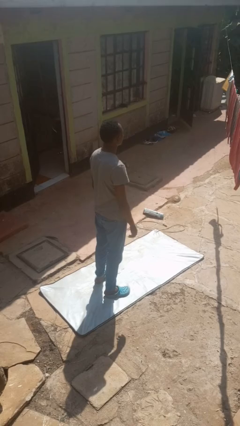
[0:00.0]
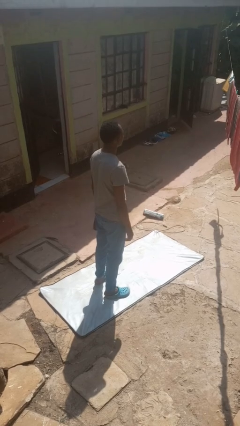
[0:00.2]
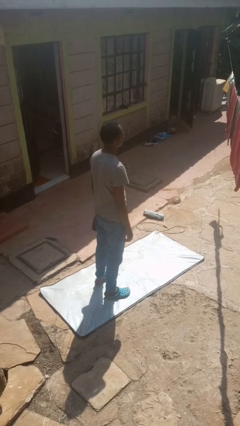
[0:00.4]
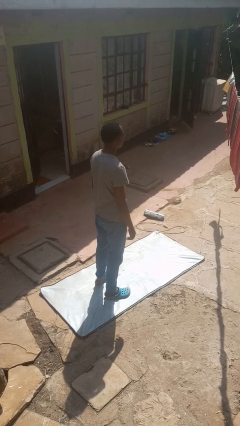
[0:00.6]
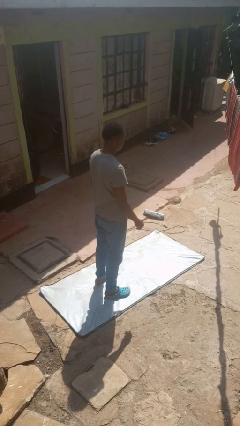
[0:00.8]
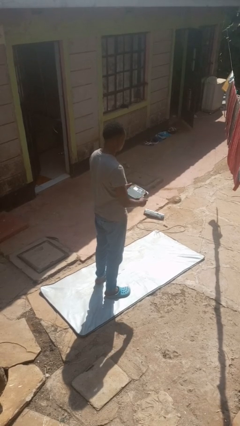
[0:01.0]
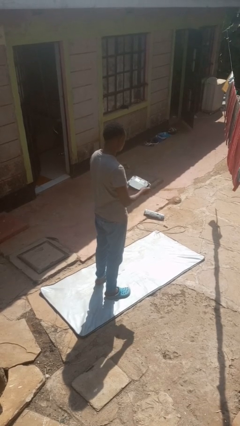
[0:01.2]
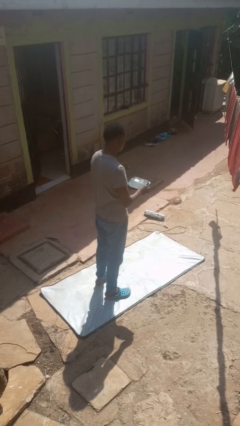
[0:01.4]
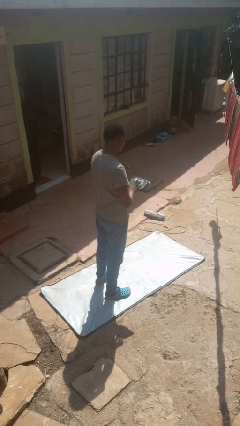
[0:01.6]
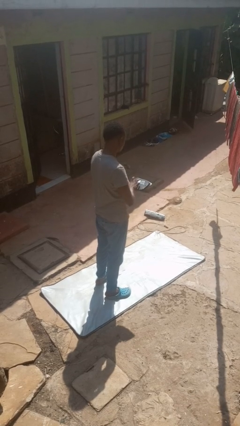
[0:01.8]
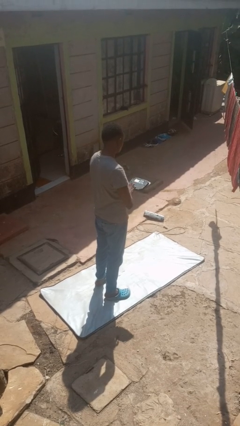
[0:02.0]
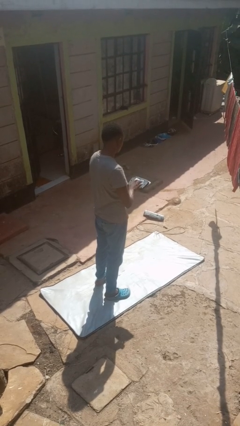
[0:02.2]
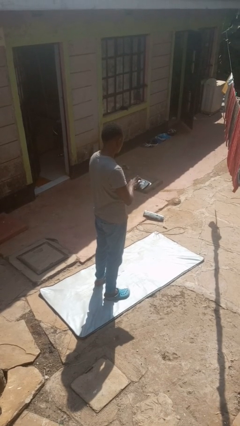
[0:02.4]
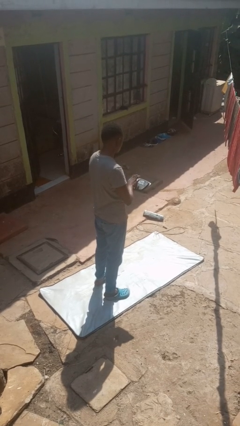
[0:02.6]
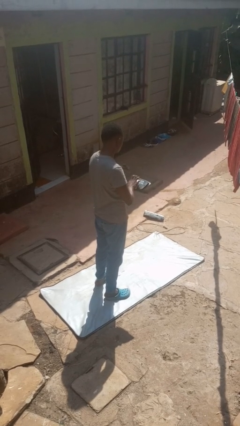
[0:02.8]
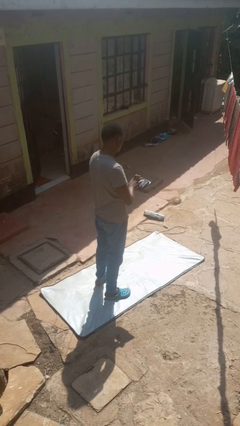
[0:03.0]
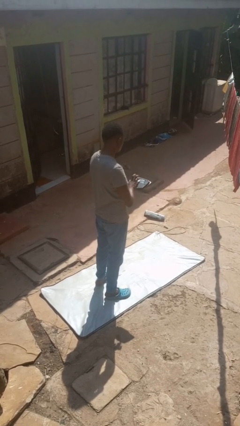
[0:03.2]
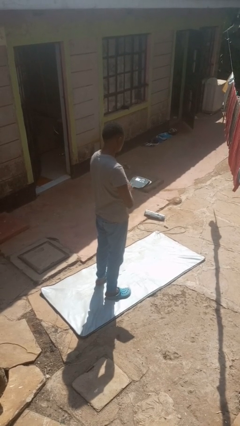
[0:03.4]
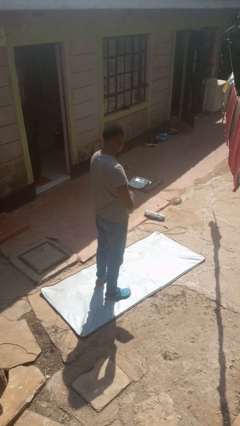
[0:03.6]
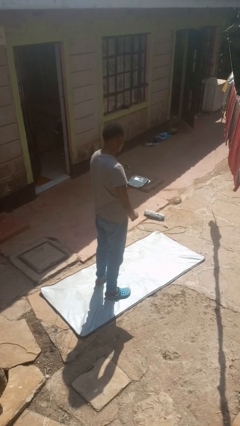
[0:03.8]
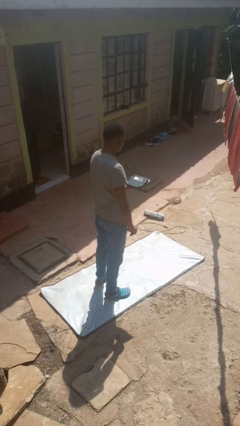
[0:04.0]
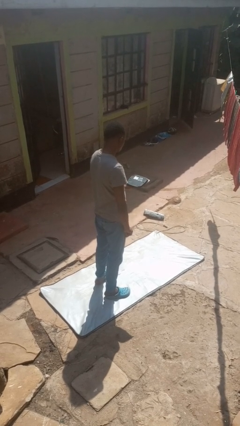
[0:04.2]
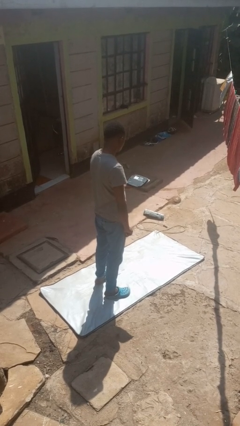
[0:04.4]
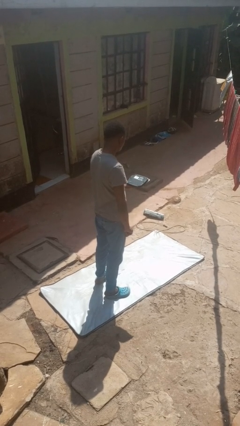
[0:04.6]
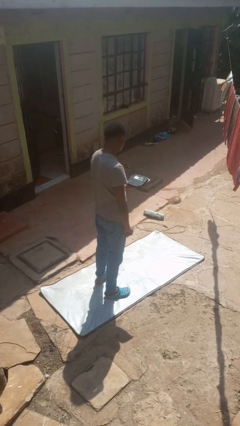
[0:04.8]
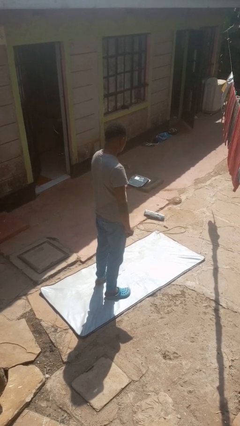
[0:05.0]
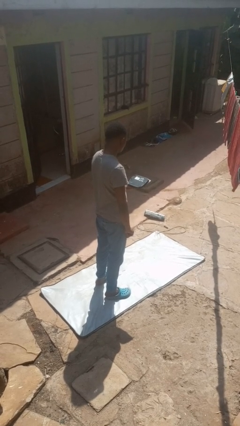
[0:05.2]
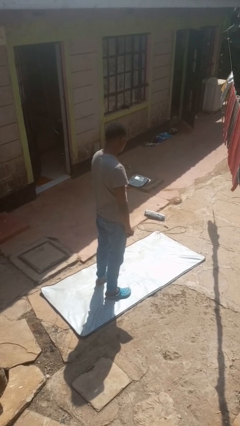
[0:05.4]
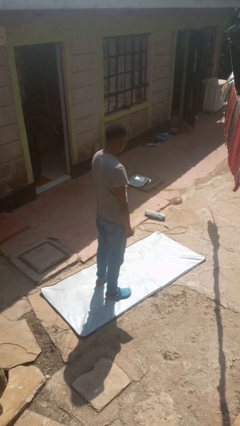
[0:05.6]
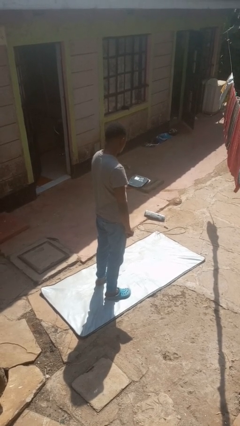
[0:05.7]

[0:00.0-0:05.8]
person interacts with tablet

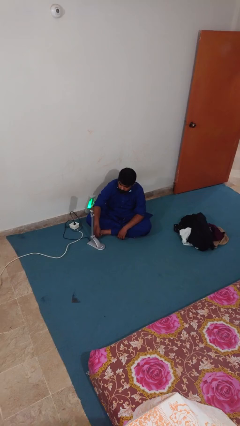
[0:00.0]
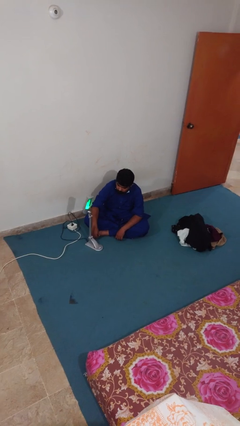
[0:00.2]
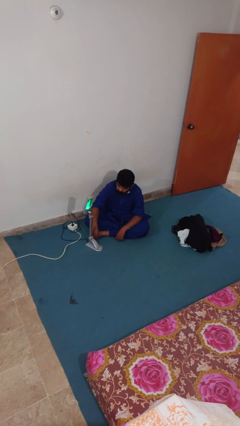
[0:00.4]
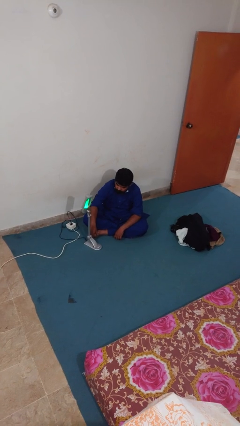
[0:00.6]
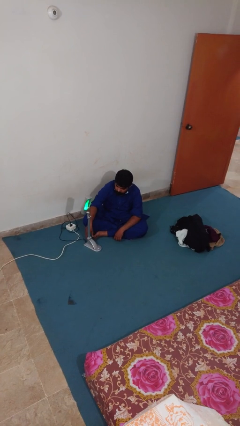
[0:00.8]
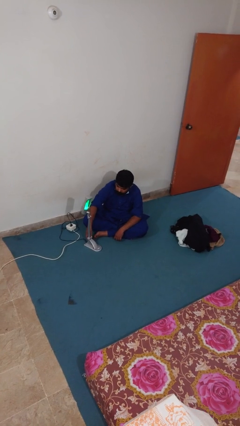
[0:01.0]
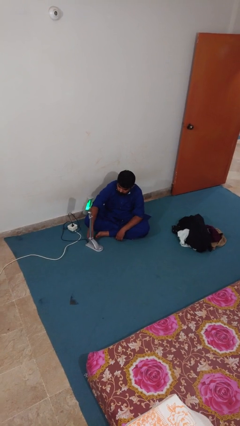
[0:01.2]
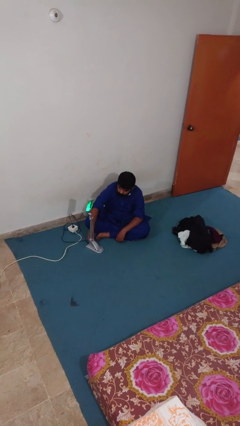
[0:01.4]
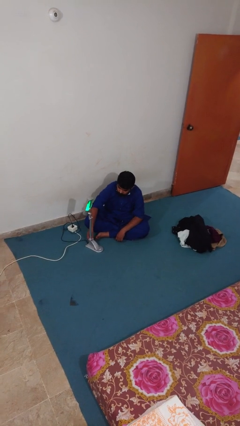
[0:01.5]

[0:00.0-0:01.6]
person turns off lamp

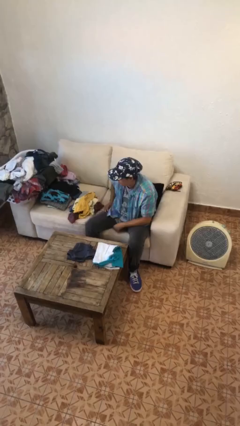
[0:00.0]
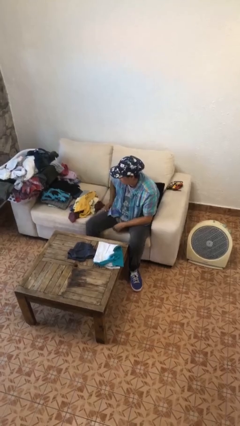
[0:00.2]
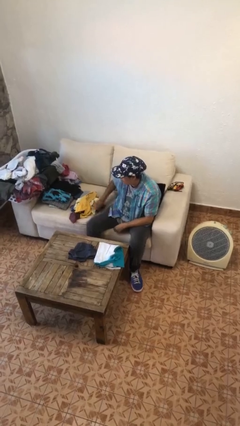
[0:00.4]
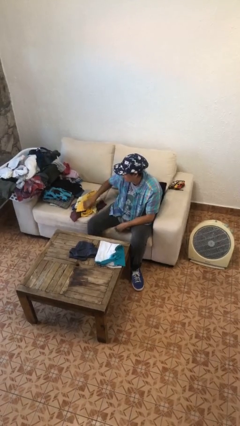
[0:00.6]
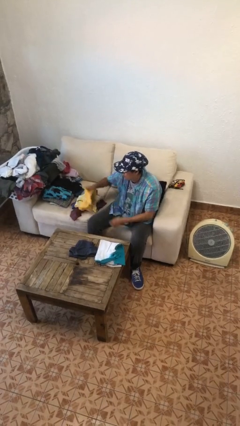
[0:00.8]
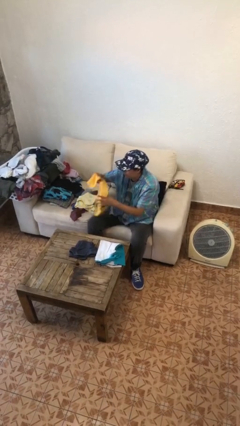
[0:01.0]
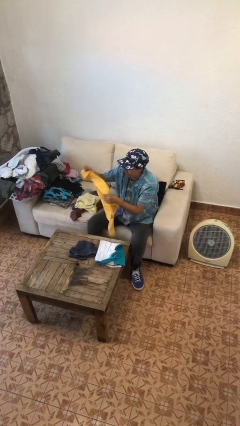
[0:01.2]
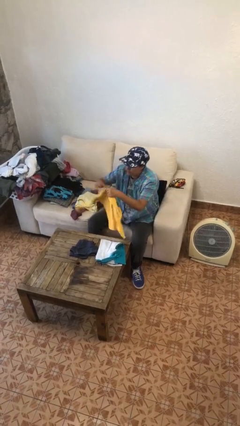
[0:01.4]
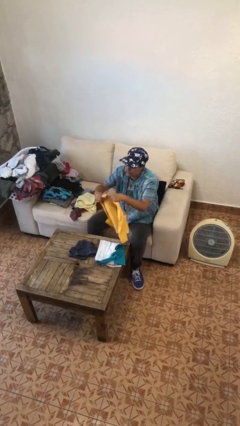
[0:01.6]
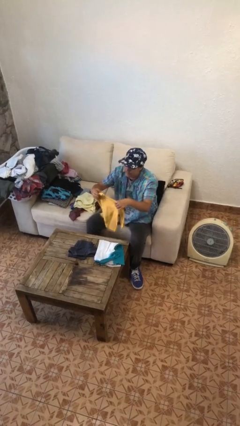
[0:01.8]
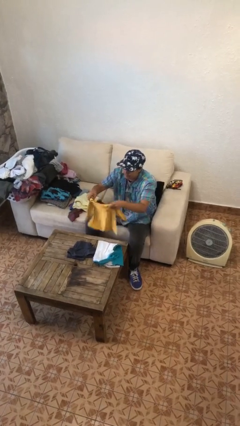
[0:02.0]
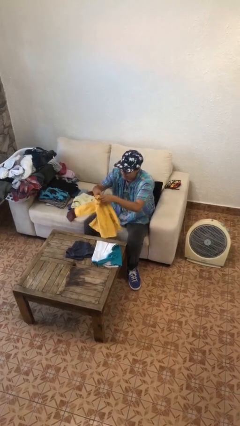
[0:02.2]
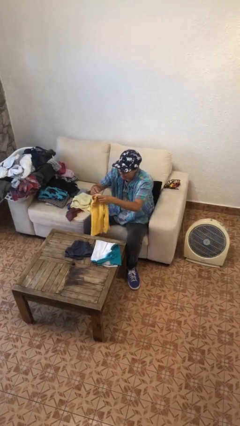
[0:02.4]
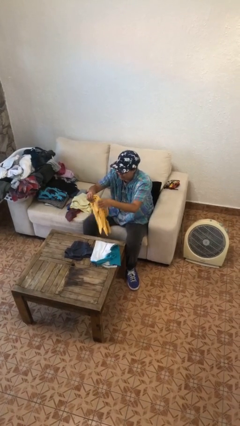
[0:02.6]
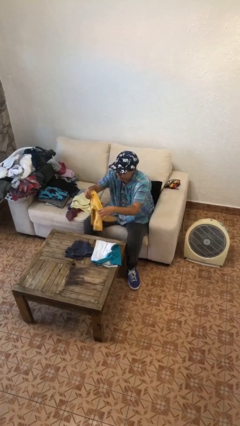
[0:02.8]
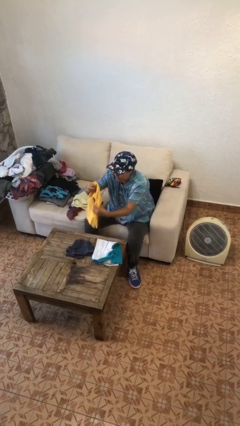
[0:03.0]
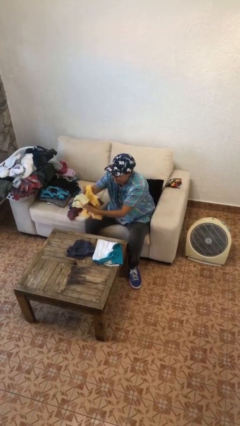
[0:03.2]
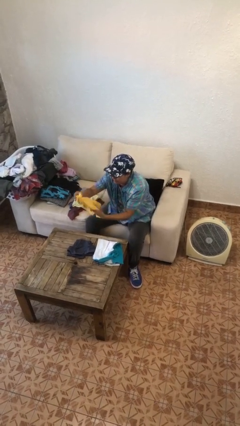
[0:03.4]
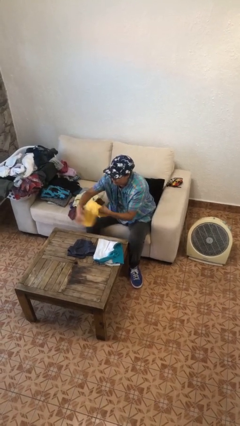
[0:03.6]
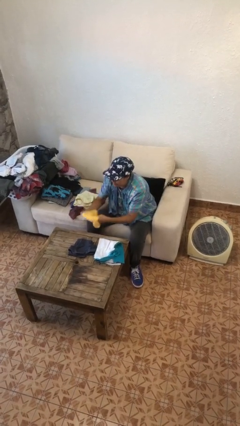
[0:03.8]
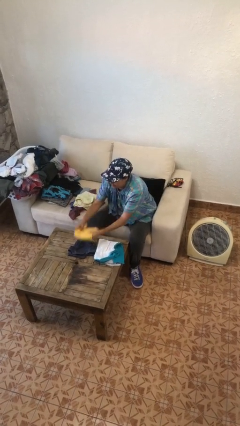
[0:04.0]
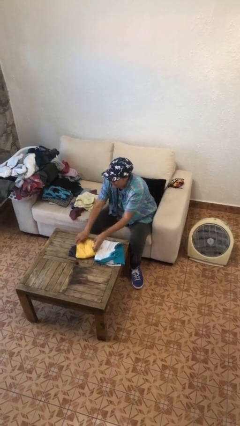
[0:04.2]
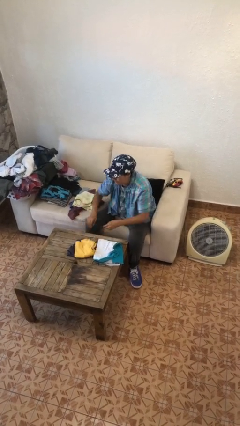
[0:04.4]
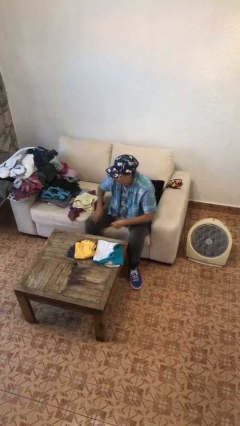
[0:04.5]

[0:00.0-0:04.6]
person folds shirt

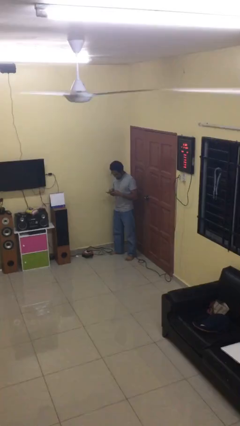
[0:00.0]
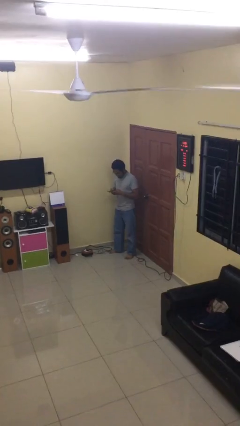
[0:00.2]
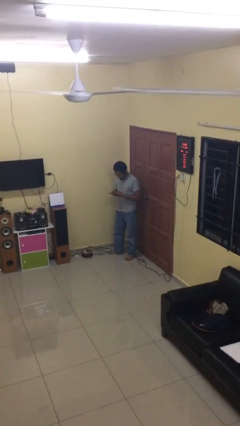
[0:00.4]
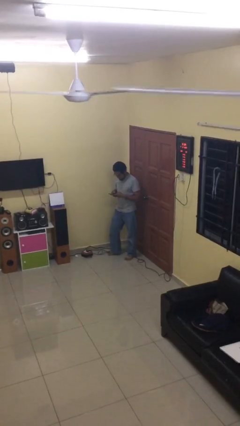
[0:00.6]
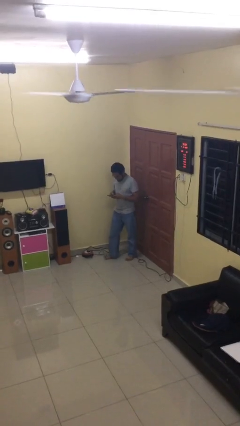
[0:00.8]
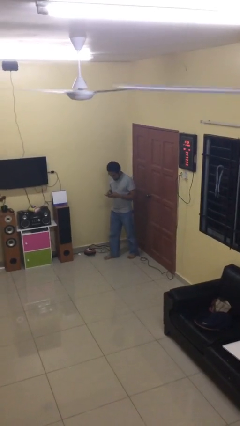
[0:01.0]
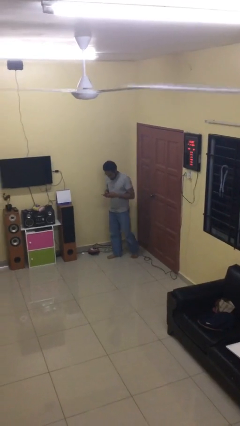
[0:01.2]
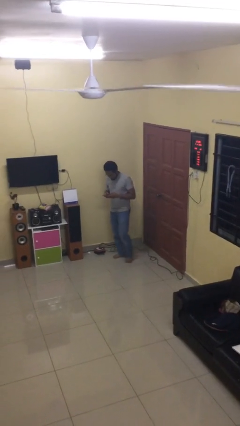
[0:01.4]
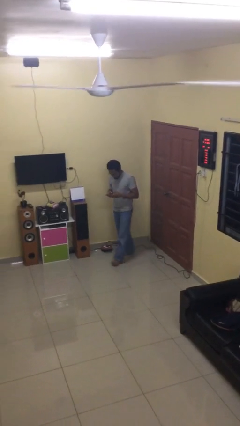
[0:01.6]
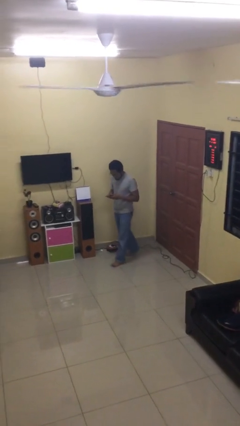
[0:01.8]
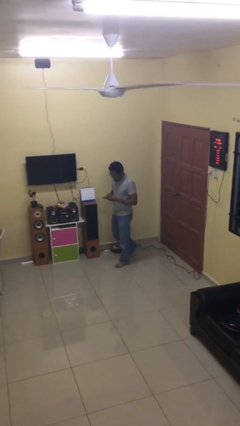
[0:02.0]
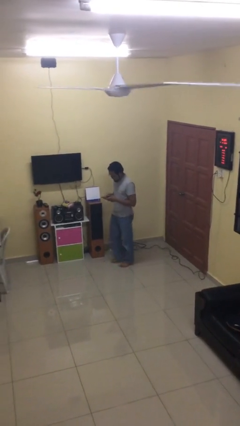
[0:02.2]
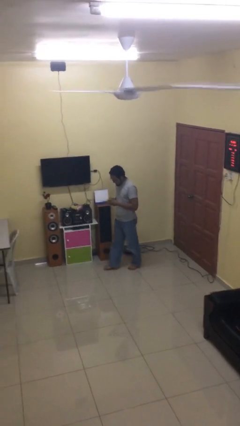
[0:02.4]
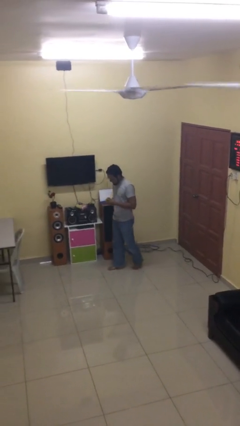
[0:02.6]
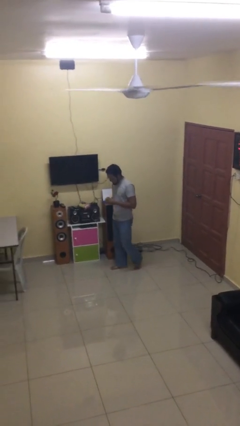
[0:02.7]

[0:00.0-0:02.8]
person texts on phone

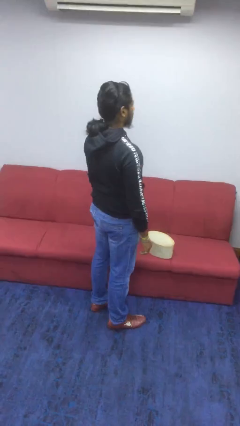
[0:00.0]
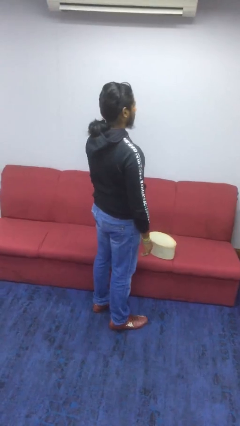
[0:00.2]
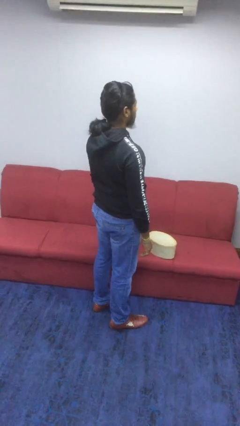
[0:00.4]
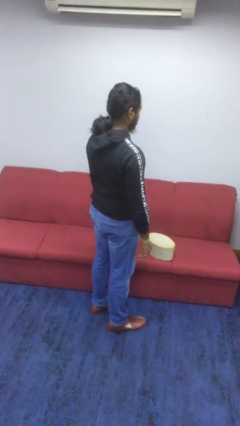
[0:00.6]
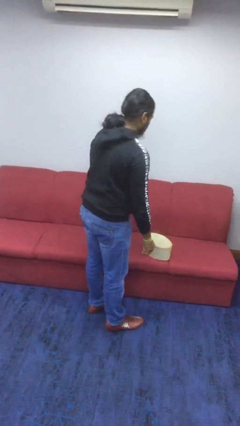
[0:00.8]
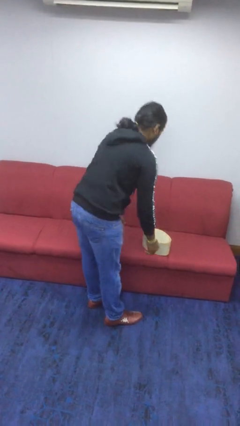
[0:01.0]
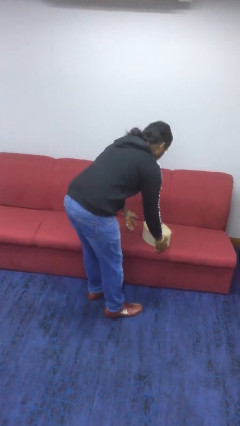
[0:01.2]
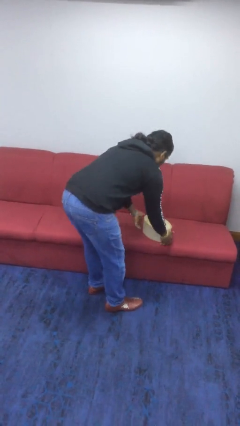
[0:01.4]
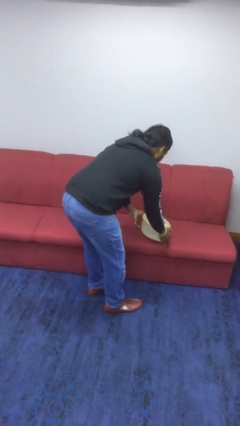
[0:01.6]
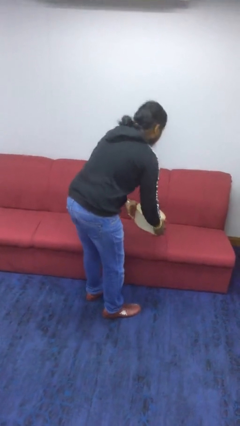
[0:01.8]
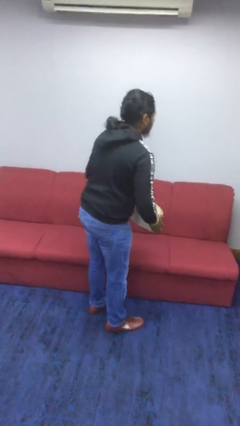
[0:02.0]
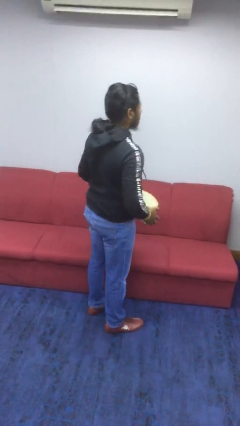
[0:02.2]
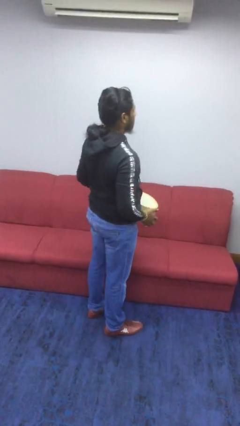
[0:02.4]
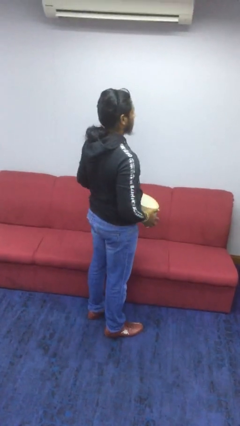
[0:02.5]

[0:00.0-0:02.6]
person picks up object from couch

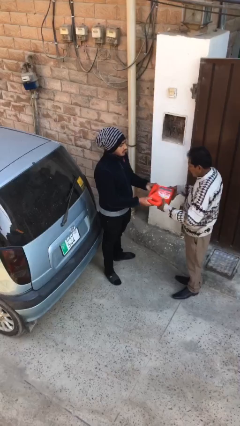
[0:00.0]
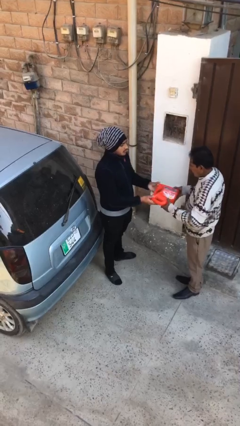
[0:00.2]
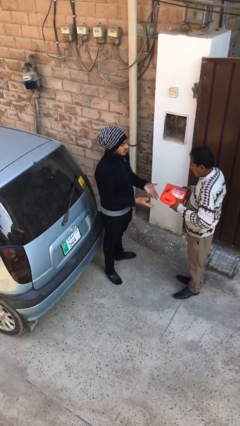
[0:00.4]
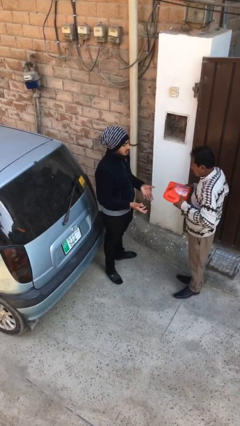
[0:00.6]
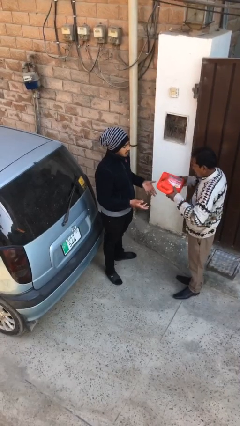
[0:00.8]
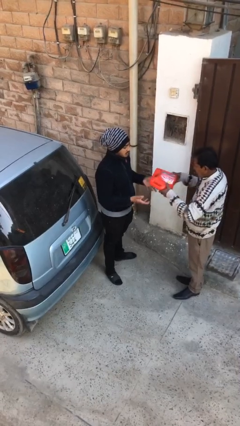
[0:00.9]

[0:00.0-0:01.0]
person transfers object to person
